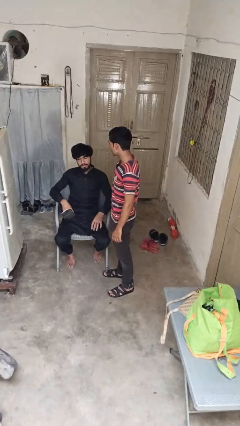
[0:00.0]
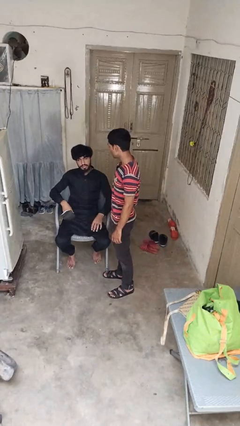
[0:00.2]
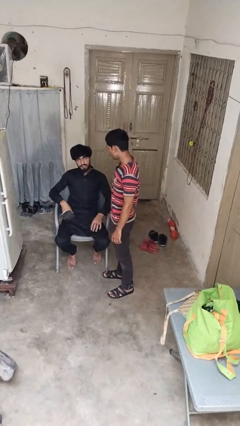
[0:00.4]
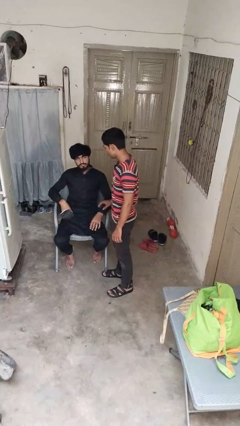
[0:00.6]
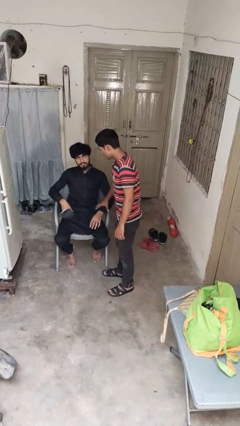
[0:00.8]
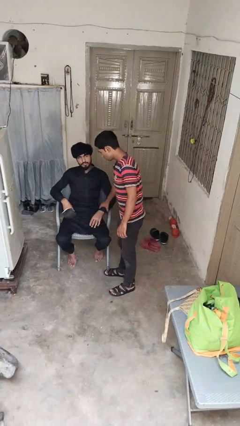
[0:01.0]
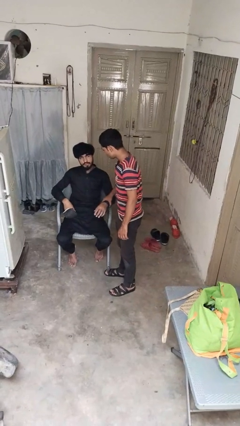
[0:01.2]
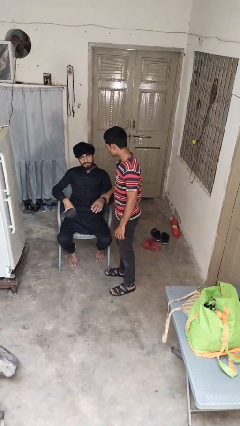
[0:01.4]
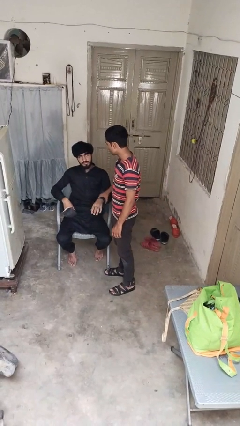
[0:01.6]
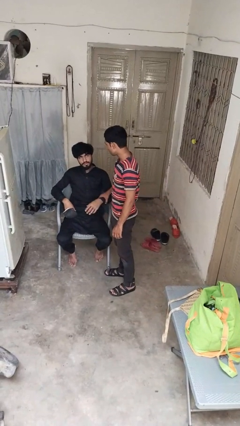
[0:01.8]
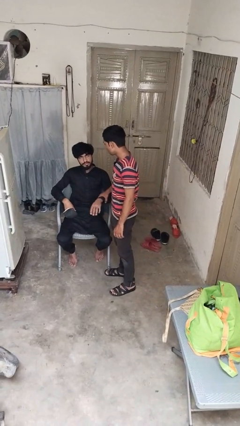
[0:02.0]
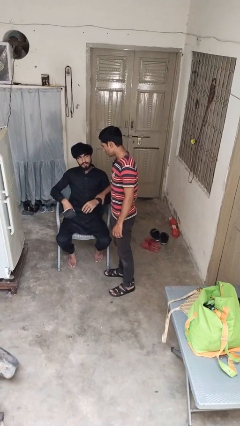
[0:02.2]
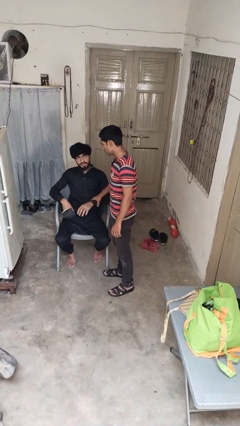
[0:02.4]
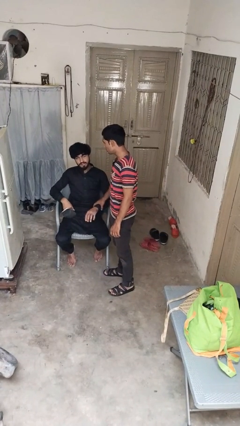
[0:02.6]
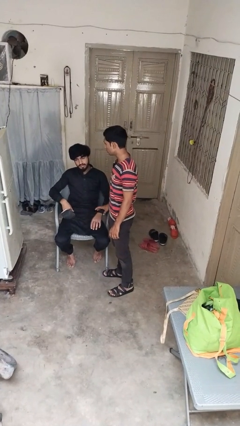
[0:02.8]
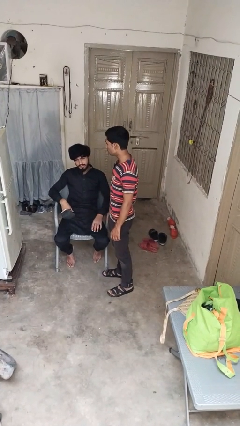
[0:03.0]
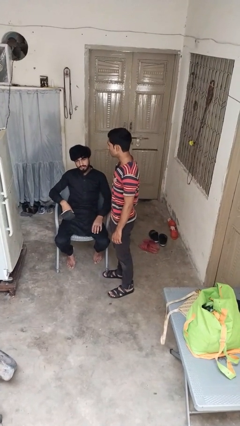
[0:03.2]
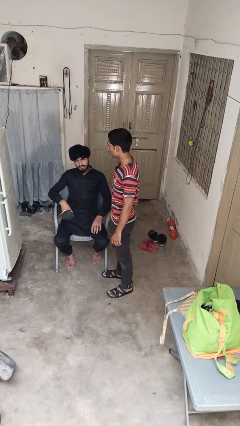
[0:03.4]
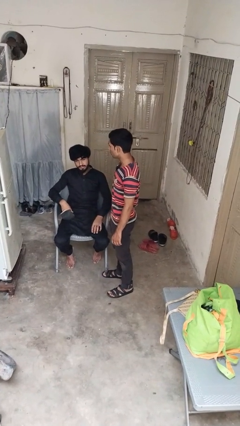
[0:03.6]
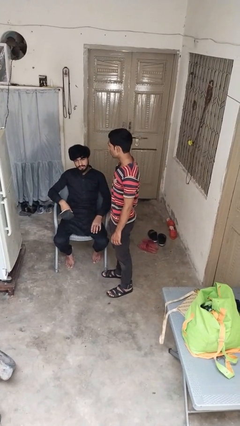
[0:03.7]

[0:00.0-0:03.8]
person grabs person by forearm

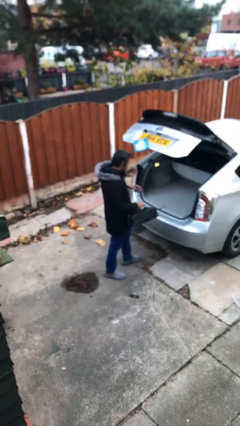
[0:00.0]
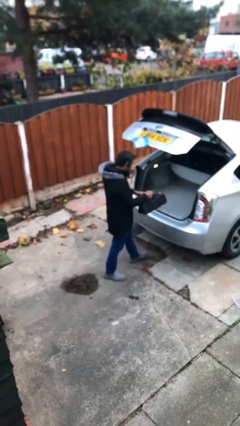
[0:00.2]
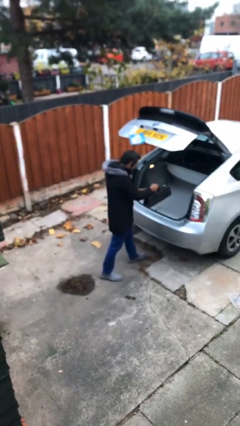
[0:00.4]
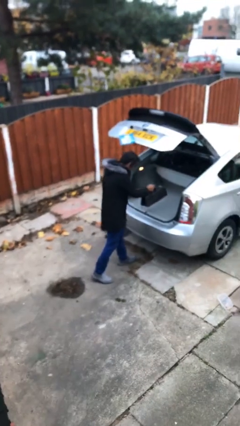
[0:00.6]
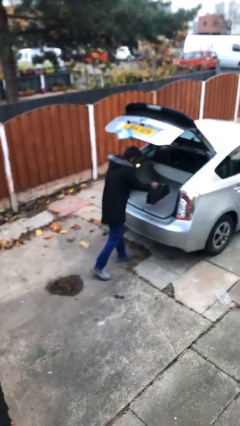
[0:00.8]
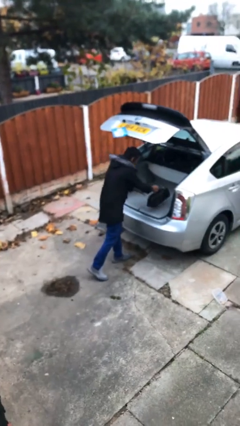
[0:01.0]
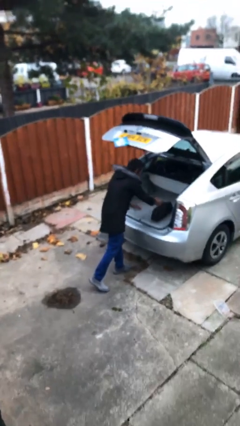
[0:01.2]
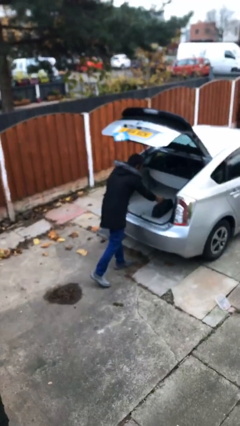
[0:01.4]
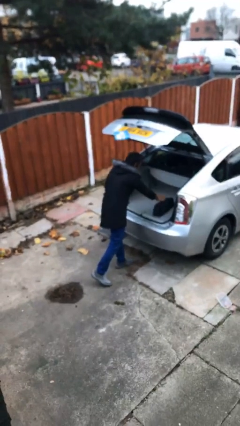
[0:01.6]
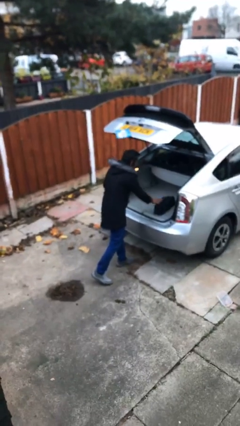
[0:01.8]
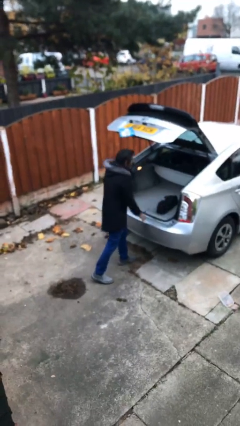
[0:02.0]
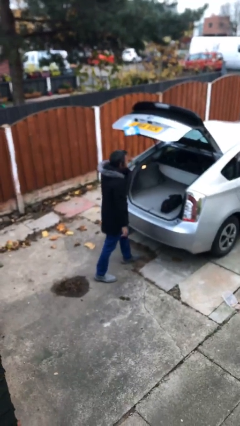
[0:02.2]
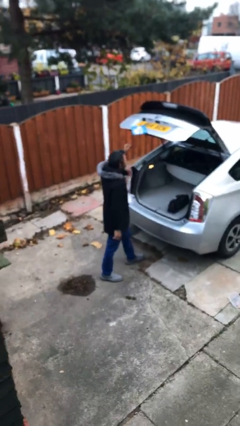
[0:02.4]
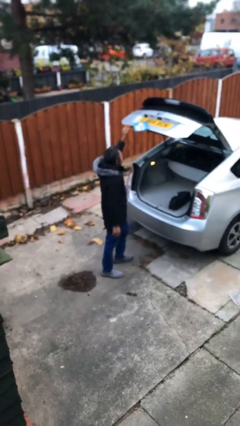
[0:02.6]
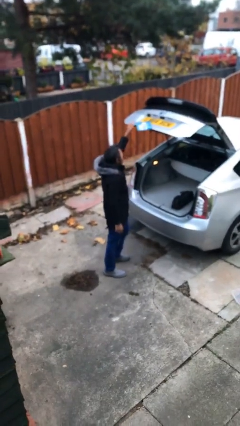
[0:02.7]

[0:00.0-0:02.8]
person loads car

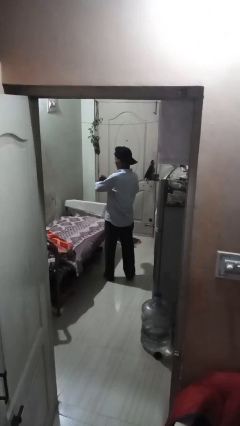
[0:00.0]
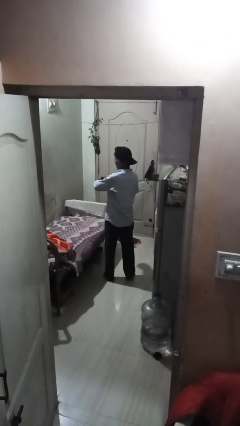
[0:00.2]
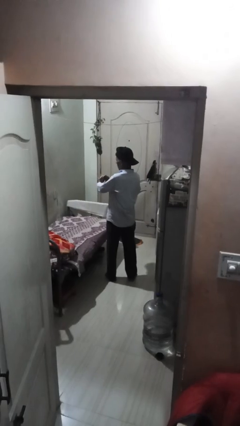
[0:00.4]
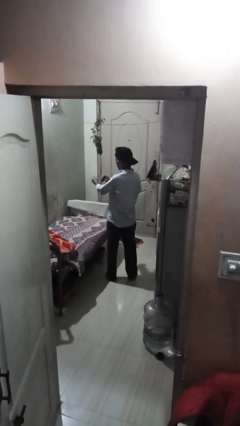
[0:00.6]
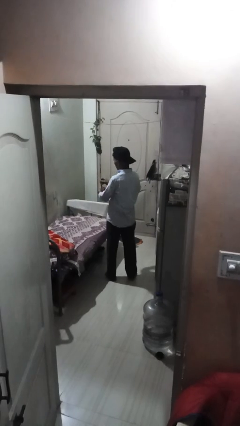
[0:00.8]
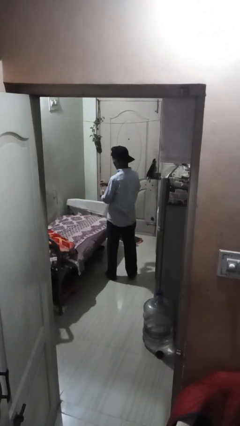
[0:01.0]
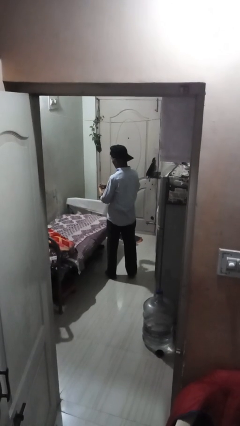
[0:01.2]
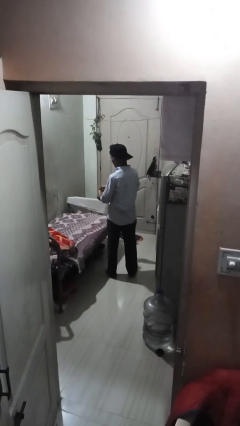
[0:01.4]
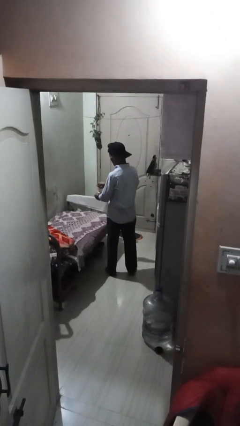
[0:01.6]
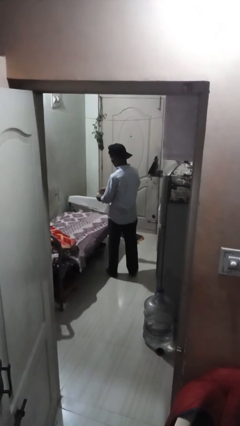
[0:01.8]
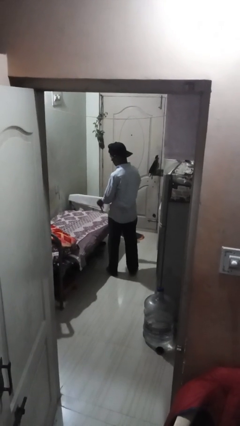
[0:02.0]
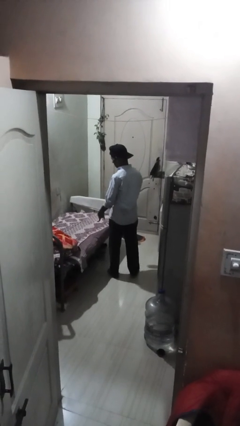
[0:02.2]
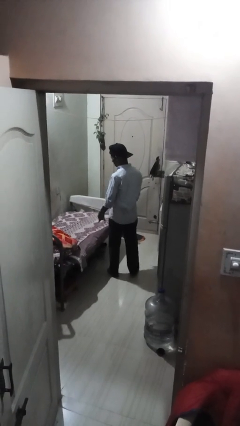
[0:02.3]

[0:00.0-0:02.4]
person takes off wristwatch

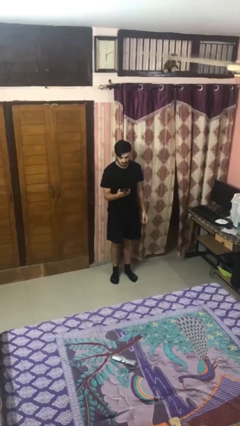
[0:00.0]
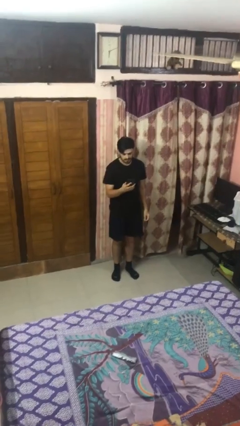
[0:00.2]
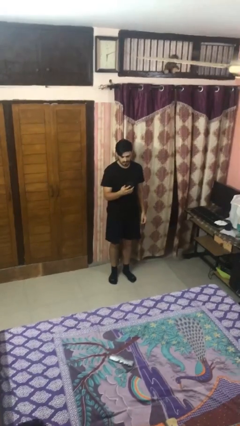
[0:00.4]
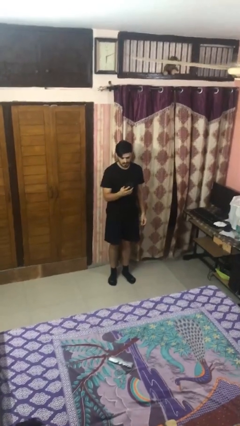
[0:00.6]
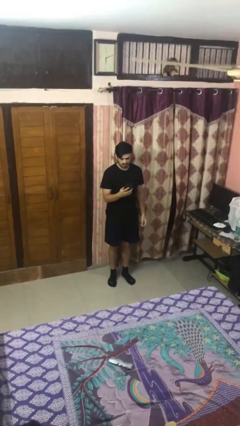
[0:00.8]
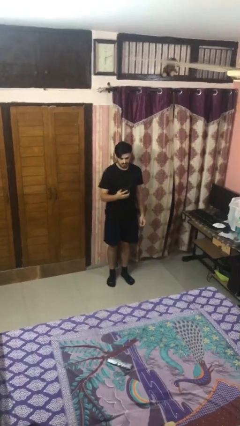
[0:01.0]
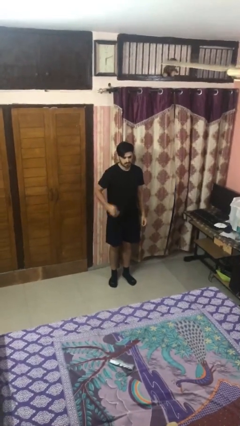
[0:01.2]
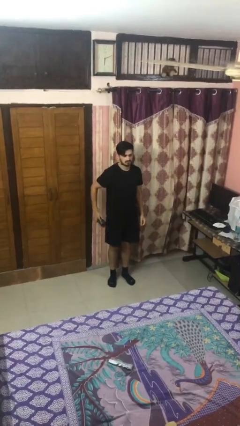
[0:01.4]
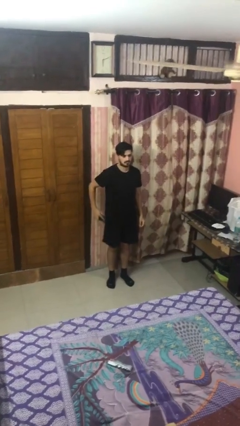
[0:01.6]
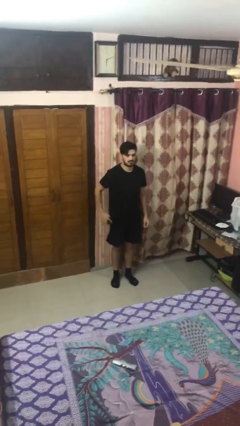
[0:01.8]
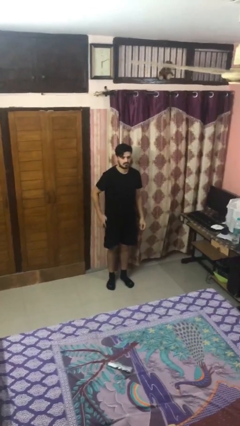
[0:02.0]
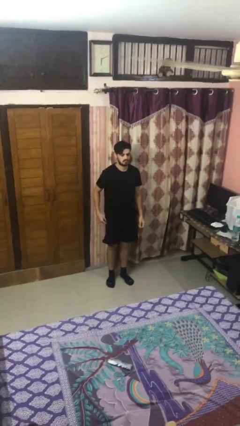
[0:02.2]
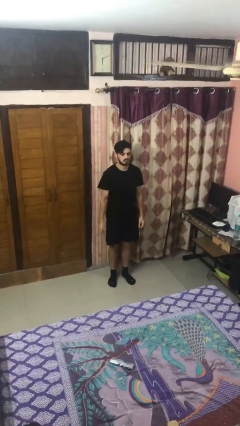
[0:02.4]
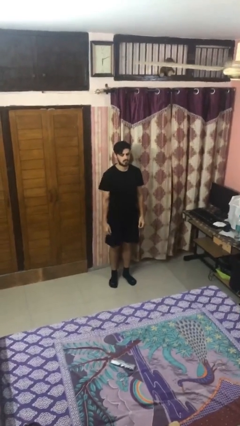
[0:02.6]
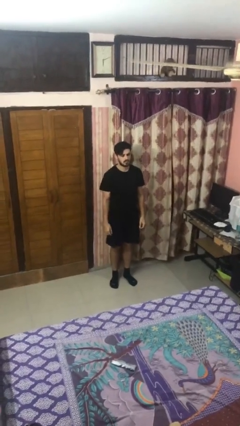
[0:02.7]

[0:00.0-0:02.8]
person puts phone into pocket

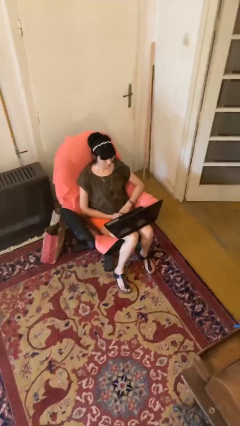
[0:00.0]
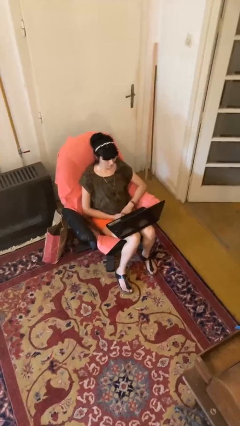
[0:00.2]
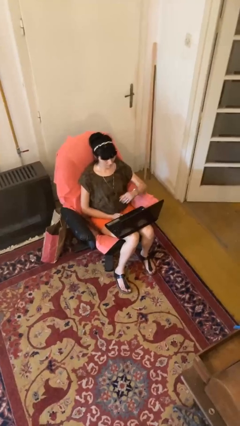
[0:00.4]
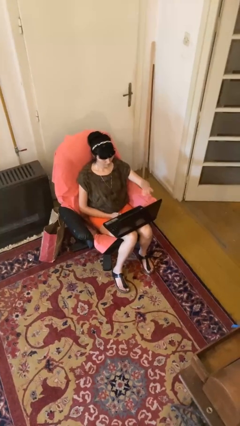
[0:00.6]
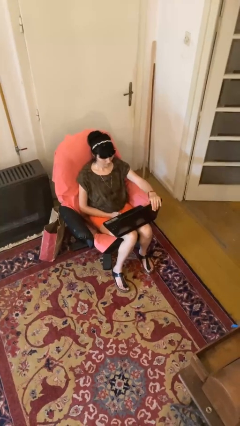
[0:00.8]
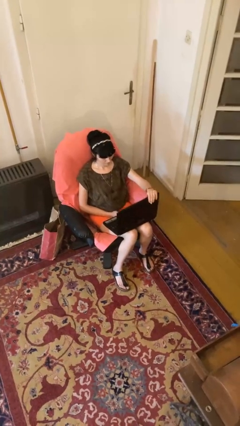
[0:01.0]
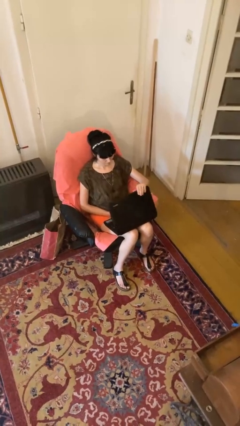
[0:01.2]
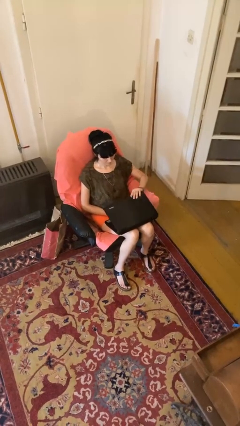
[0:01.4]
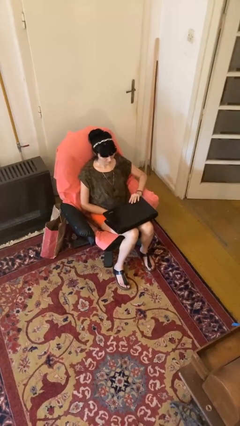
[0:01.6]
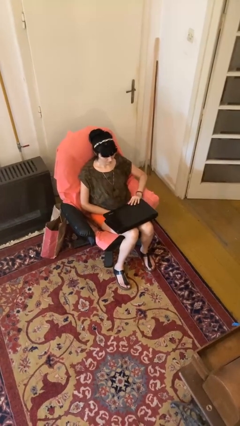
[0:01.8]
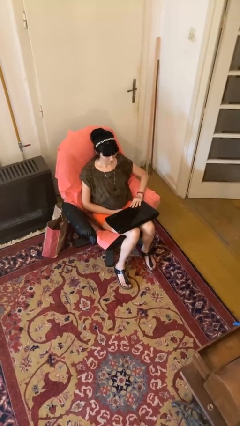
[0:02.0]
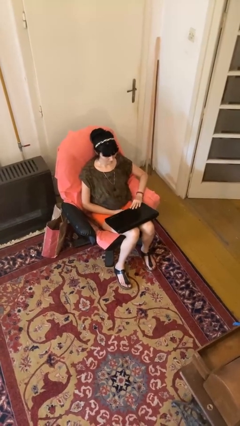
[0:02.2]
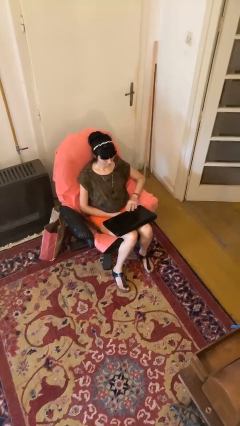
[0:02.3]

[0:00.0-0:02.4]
person closes laptop

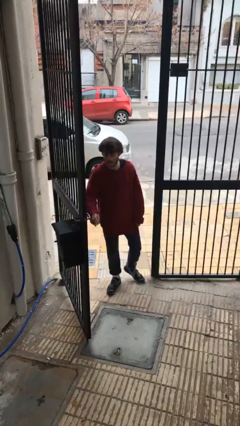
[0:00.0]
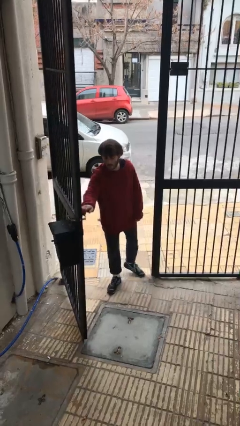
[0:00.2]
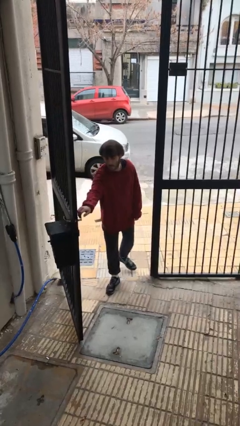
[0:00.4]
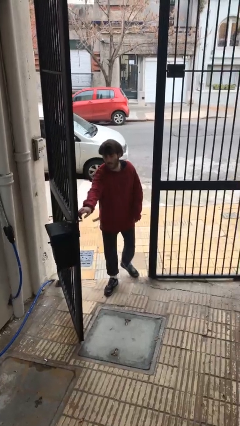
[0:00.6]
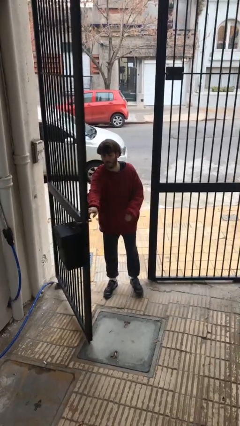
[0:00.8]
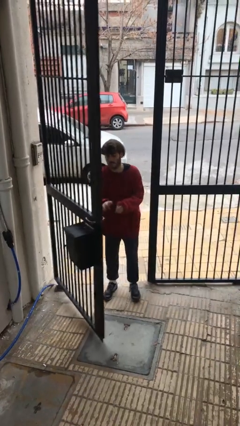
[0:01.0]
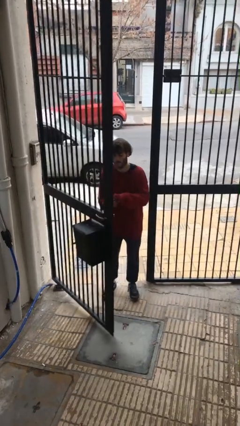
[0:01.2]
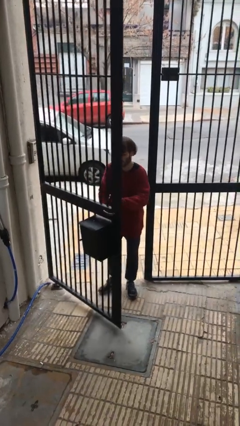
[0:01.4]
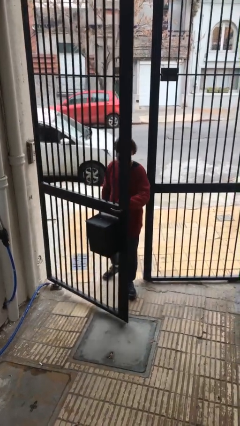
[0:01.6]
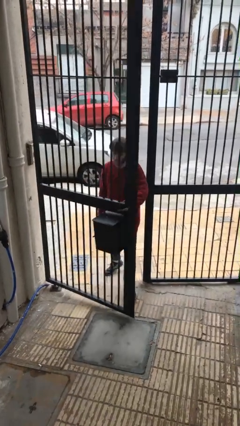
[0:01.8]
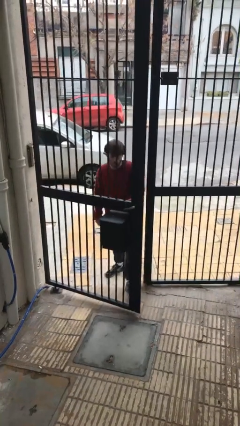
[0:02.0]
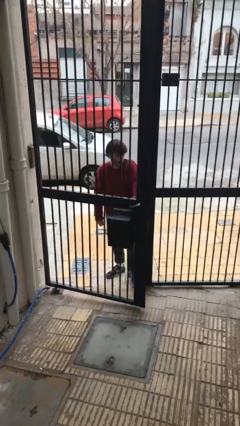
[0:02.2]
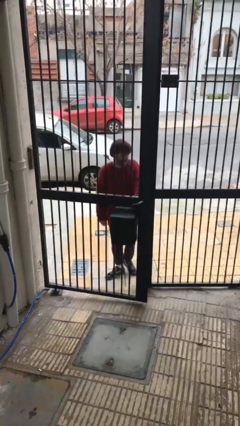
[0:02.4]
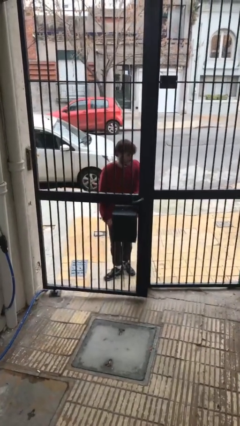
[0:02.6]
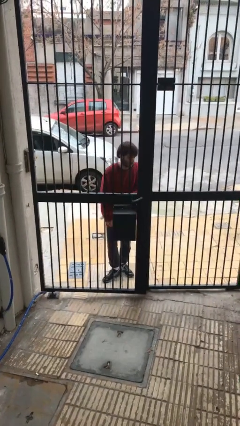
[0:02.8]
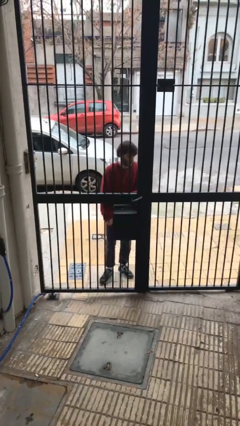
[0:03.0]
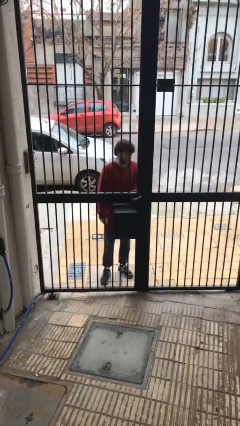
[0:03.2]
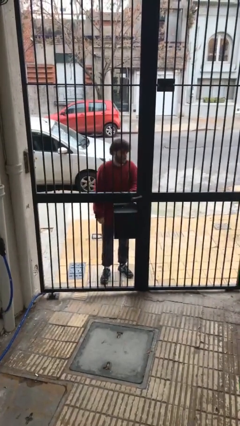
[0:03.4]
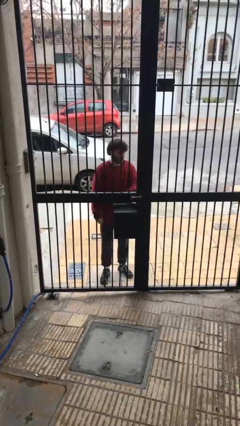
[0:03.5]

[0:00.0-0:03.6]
person closes gate
